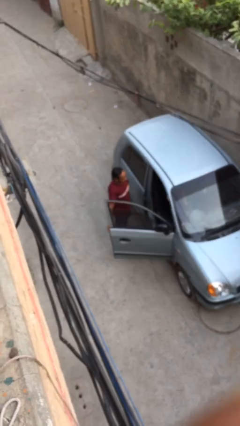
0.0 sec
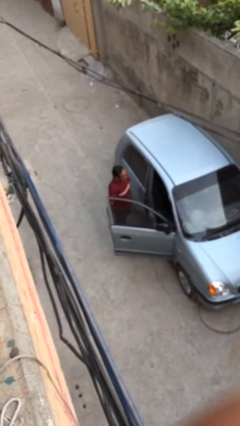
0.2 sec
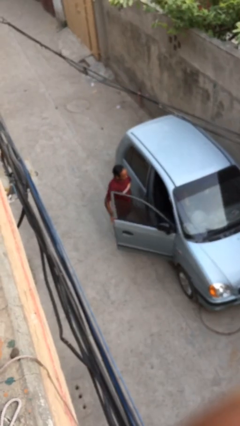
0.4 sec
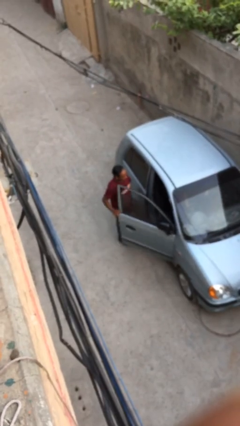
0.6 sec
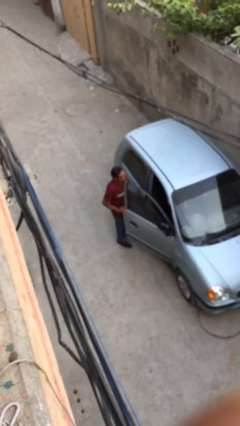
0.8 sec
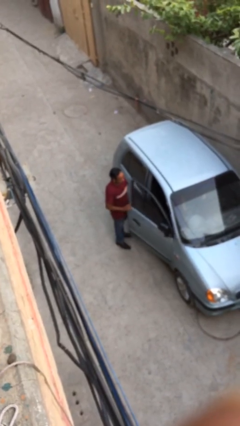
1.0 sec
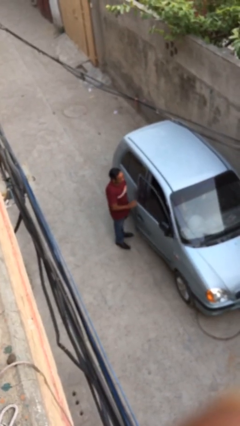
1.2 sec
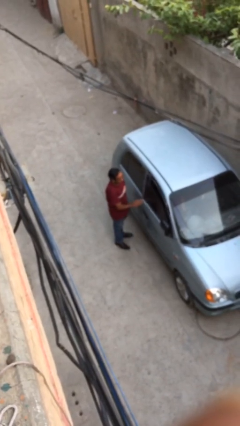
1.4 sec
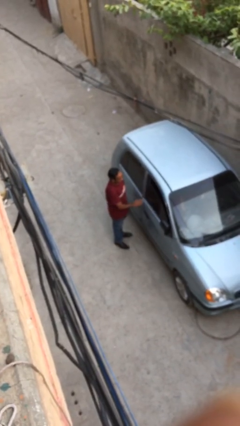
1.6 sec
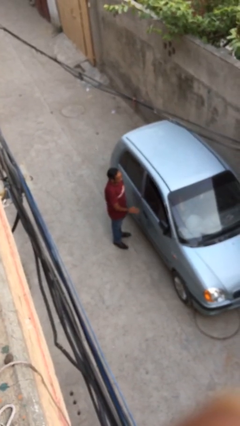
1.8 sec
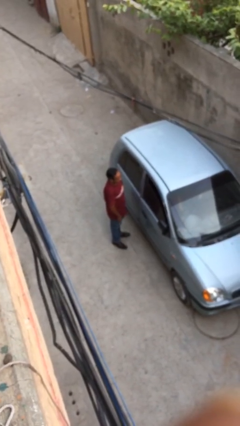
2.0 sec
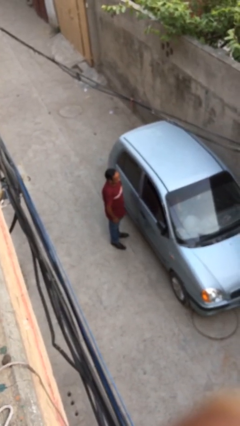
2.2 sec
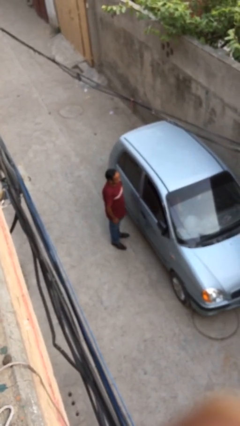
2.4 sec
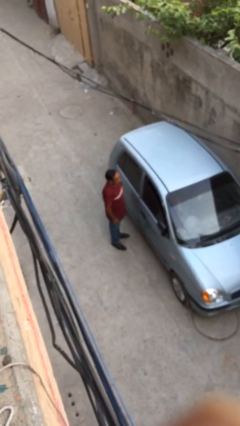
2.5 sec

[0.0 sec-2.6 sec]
person closes car door

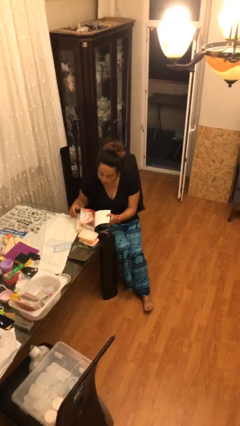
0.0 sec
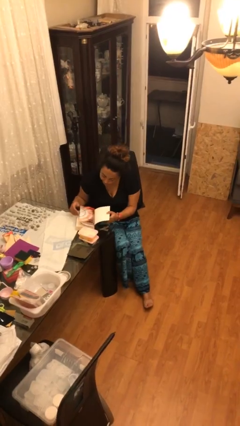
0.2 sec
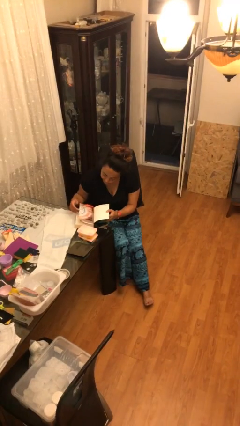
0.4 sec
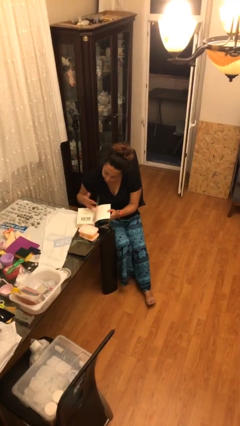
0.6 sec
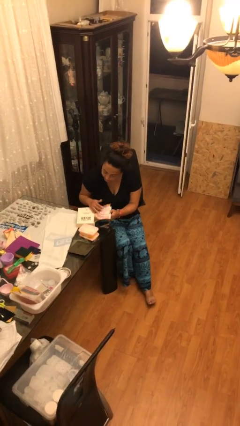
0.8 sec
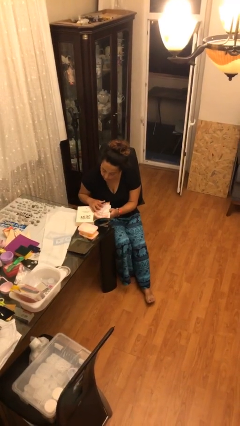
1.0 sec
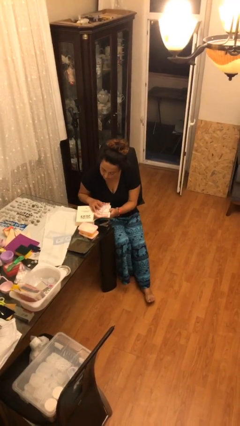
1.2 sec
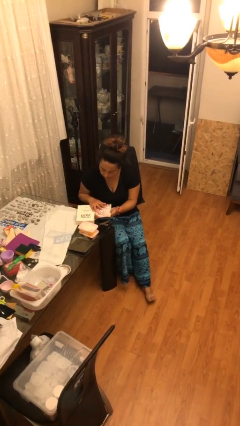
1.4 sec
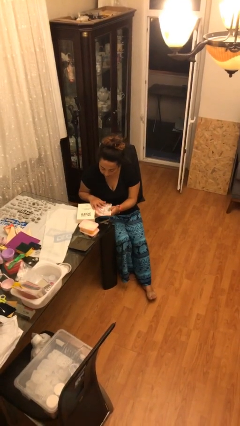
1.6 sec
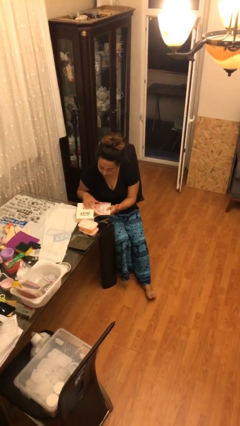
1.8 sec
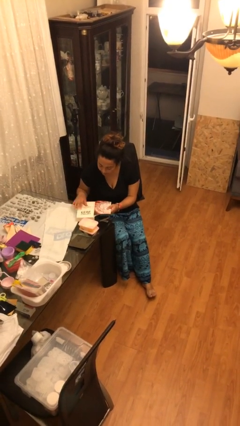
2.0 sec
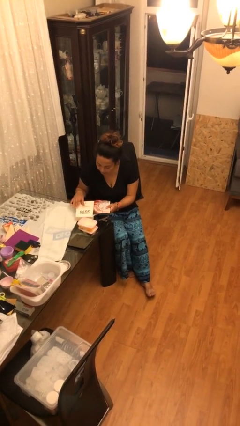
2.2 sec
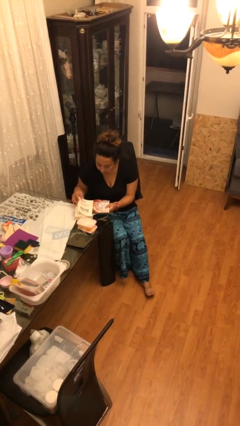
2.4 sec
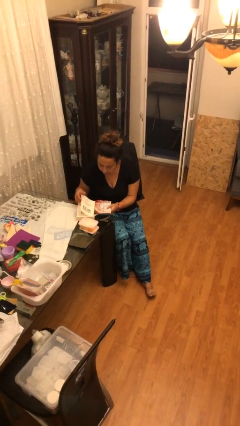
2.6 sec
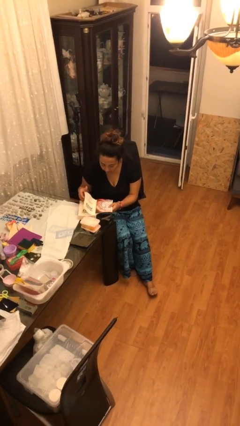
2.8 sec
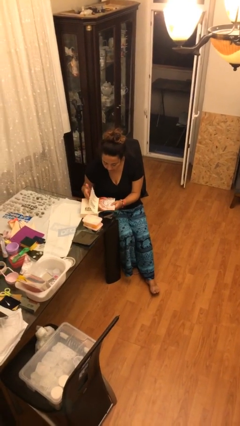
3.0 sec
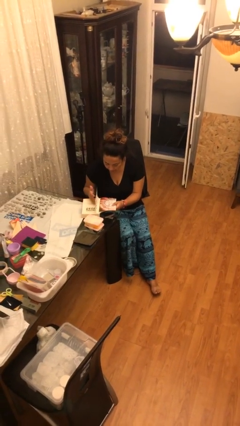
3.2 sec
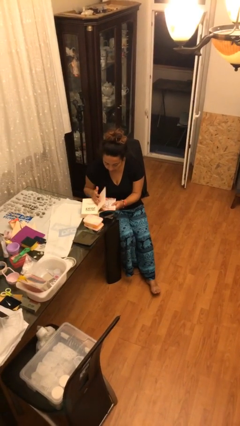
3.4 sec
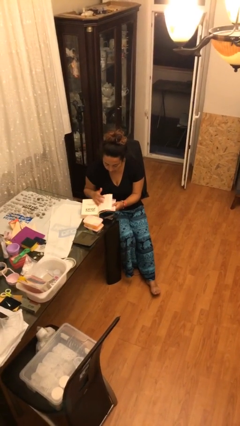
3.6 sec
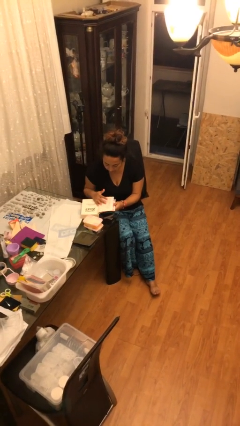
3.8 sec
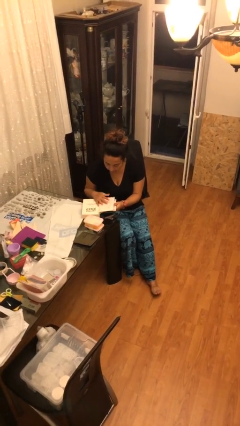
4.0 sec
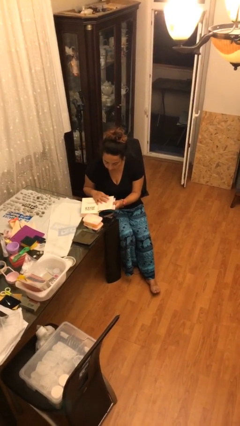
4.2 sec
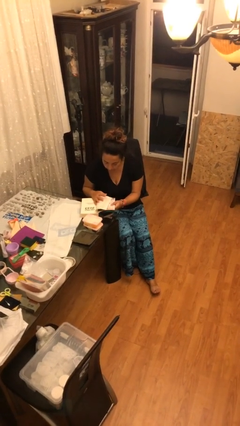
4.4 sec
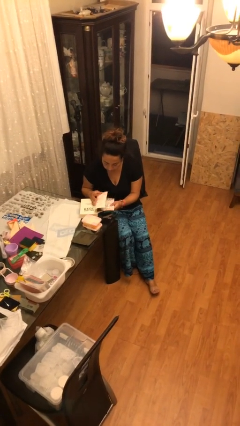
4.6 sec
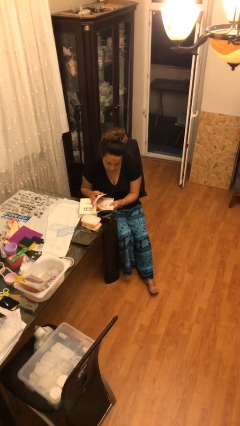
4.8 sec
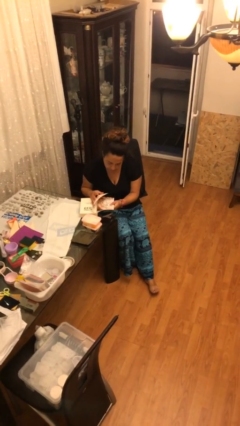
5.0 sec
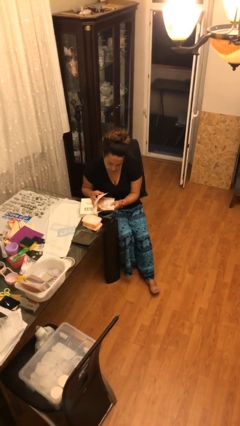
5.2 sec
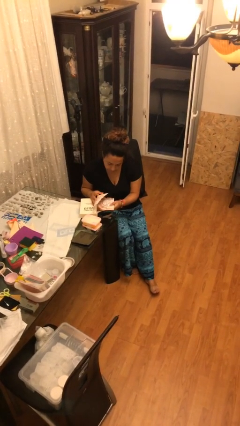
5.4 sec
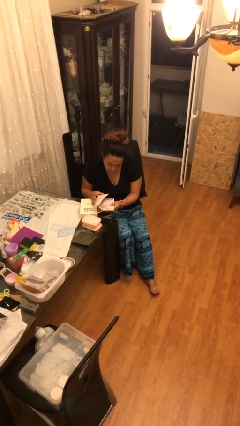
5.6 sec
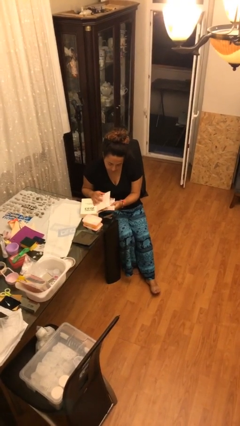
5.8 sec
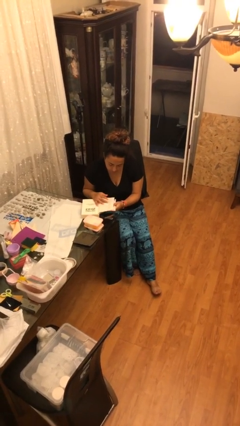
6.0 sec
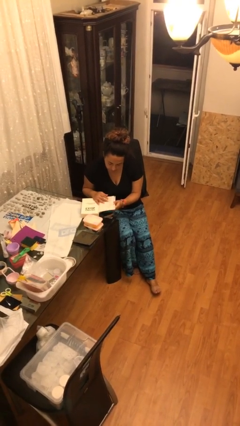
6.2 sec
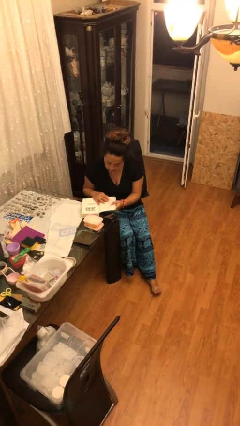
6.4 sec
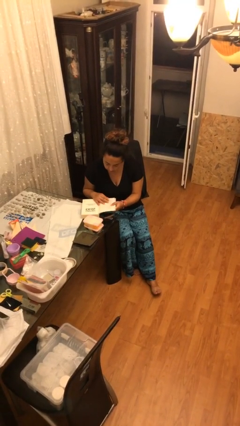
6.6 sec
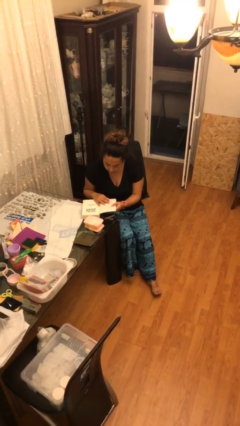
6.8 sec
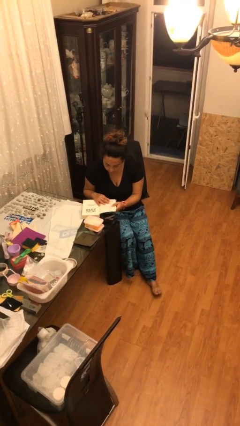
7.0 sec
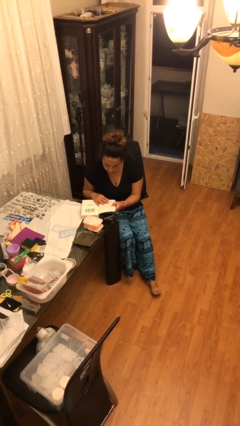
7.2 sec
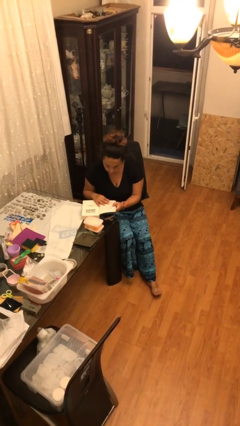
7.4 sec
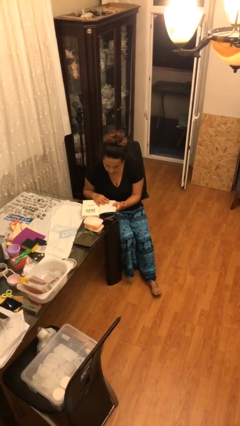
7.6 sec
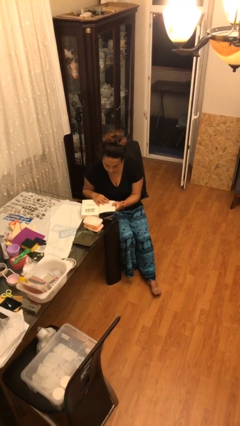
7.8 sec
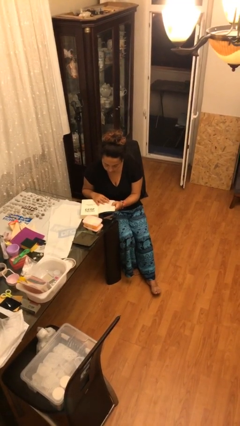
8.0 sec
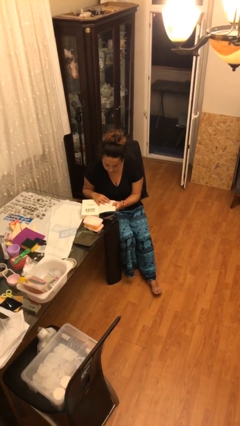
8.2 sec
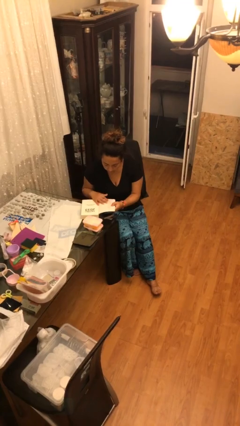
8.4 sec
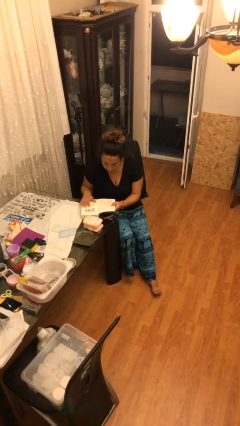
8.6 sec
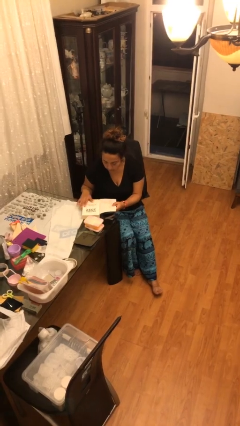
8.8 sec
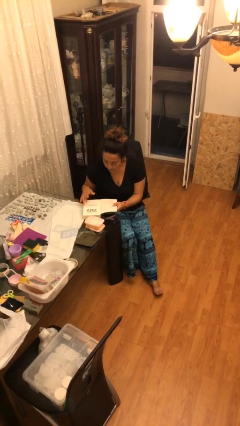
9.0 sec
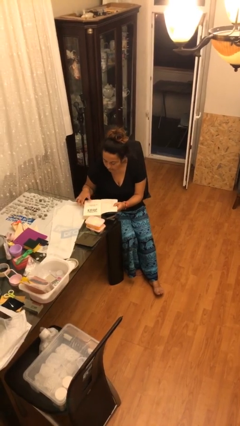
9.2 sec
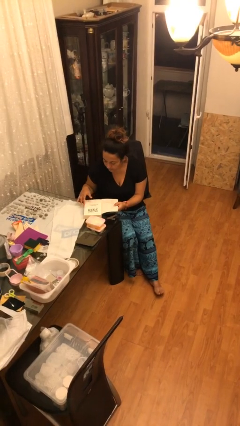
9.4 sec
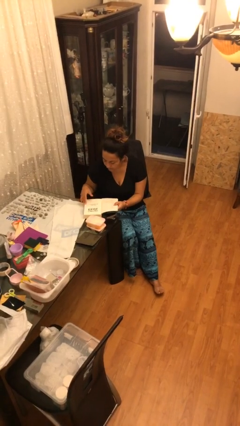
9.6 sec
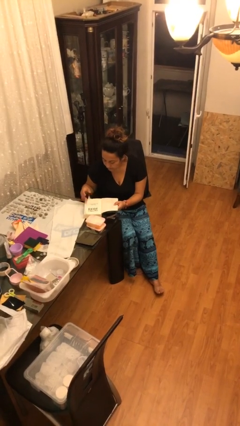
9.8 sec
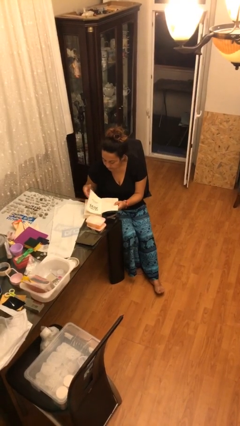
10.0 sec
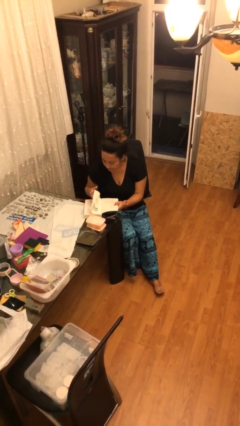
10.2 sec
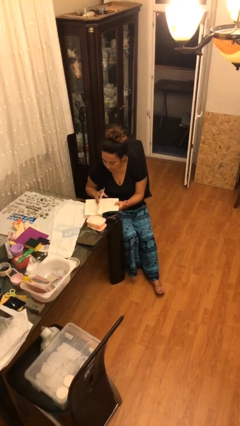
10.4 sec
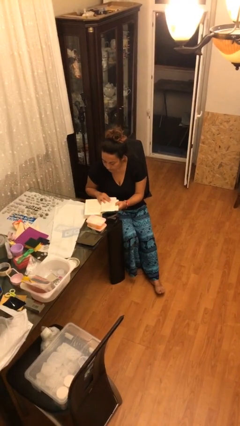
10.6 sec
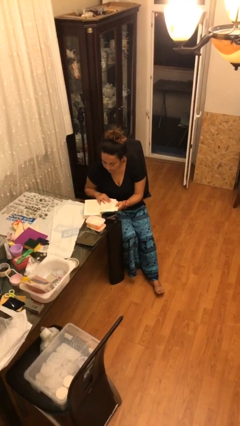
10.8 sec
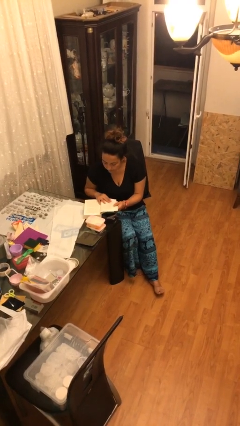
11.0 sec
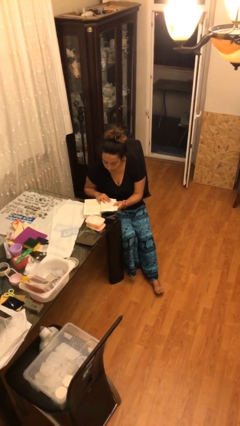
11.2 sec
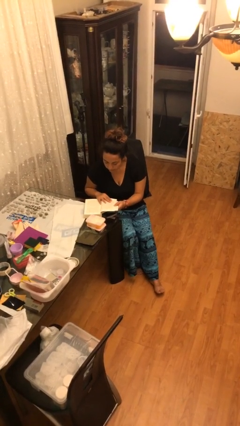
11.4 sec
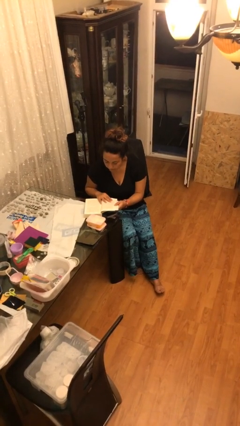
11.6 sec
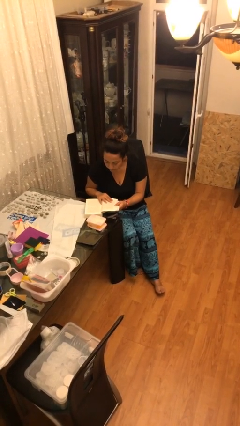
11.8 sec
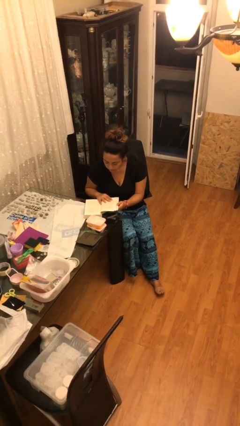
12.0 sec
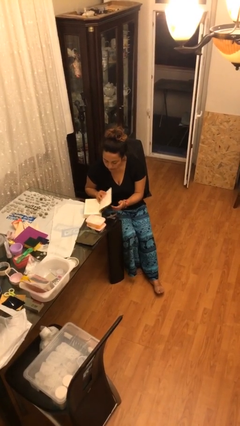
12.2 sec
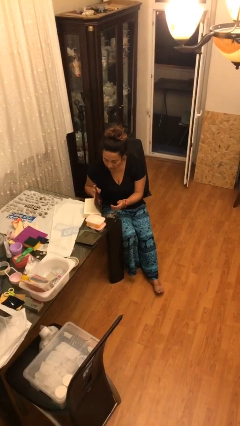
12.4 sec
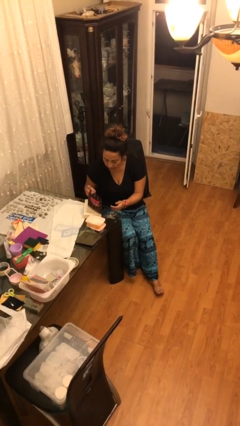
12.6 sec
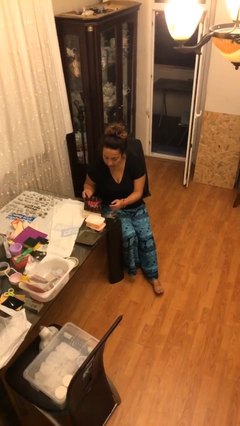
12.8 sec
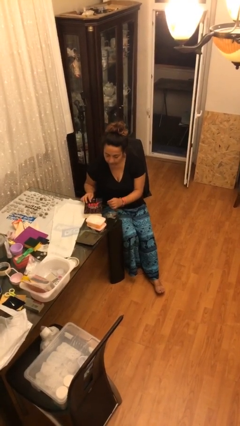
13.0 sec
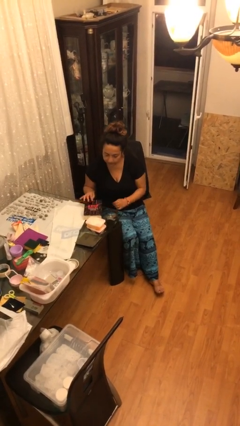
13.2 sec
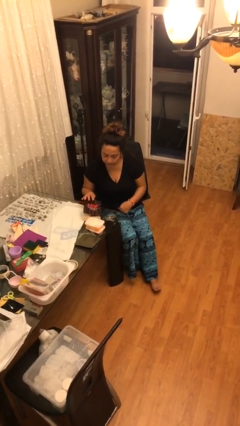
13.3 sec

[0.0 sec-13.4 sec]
person reads document

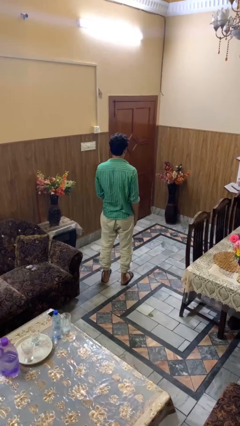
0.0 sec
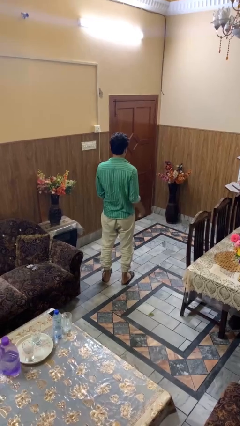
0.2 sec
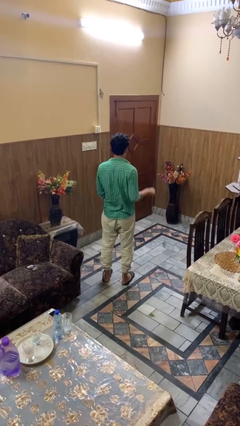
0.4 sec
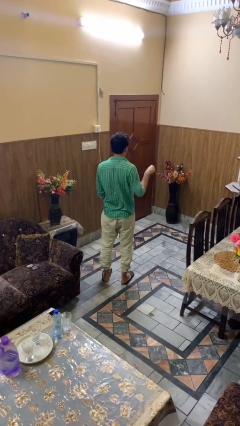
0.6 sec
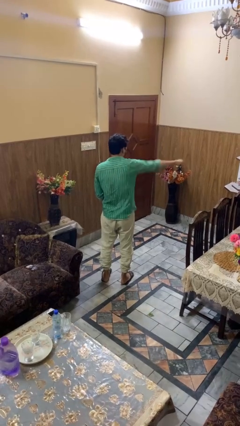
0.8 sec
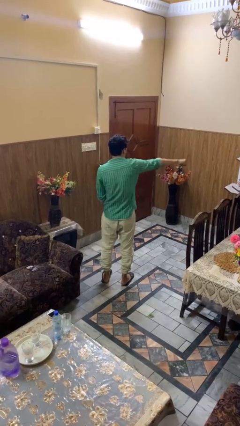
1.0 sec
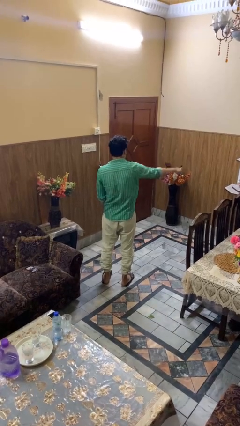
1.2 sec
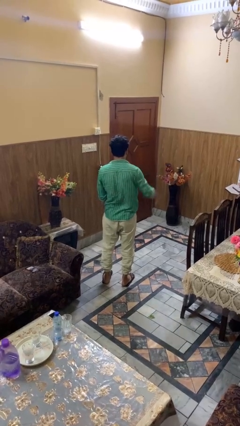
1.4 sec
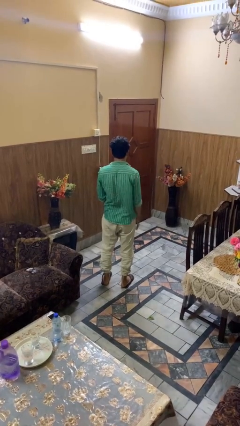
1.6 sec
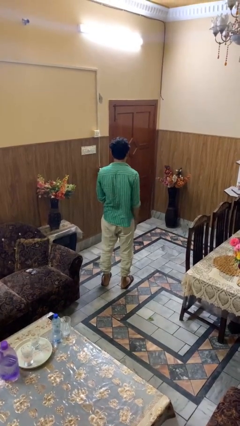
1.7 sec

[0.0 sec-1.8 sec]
person punches

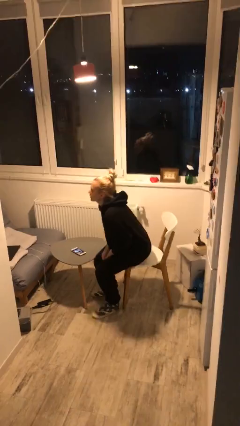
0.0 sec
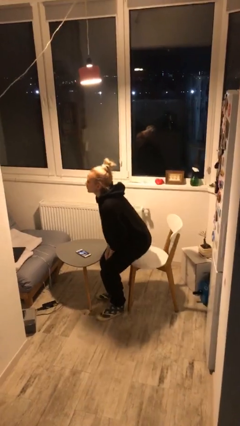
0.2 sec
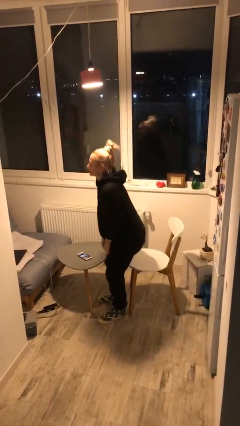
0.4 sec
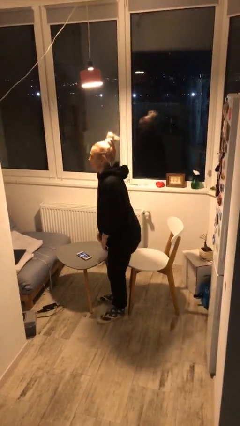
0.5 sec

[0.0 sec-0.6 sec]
person stands up
